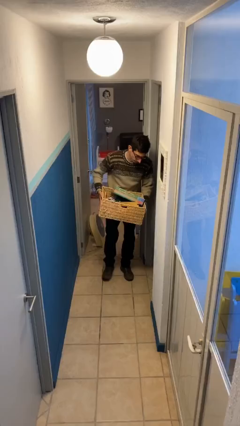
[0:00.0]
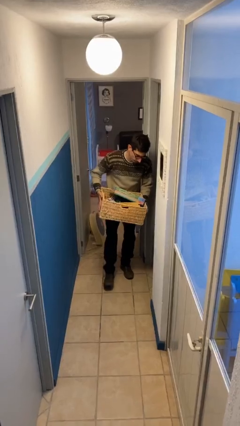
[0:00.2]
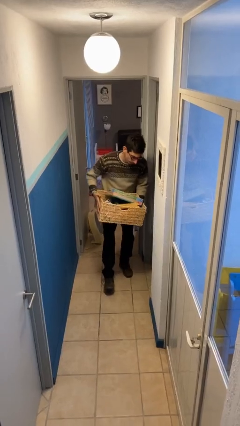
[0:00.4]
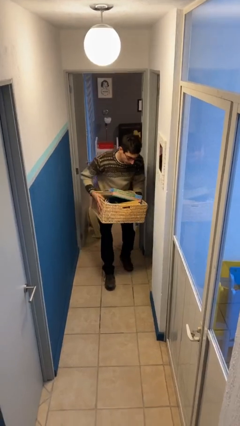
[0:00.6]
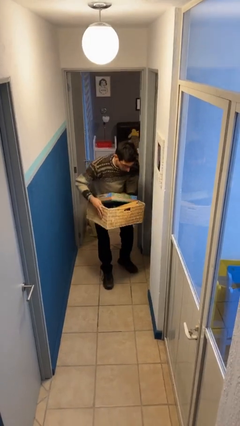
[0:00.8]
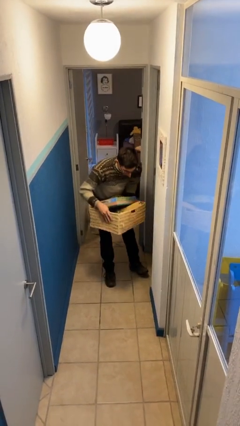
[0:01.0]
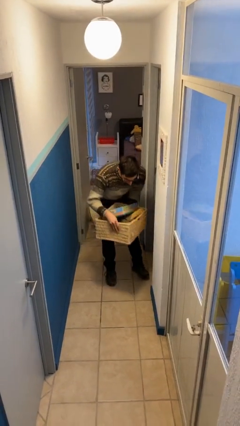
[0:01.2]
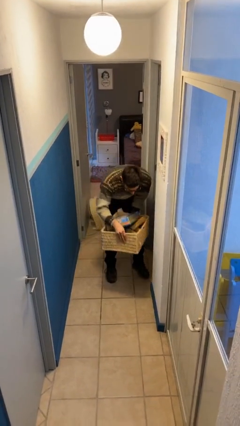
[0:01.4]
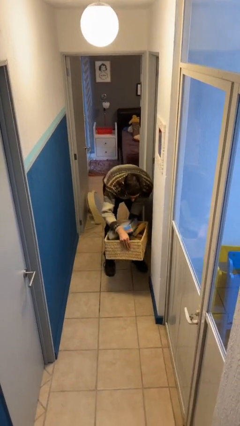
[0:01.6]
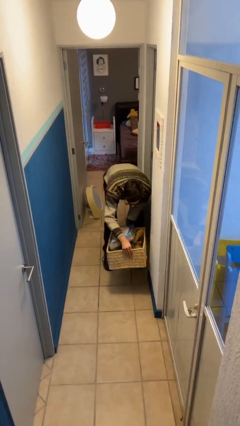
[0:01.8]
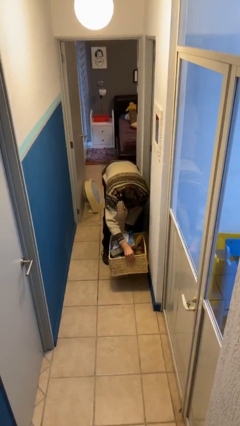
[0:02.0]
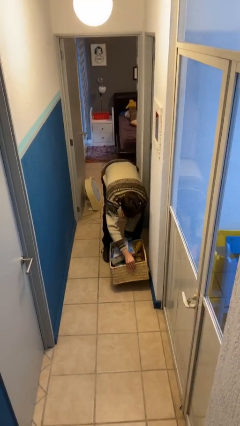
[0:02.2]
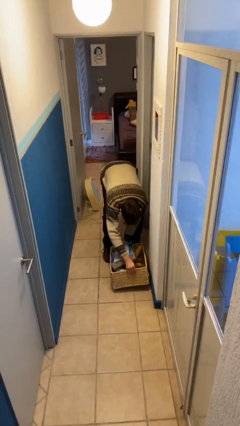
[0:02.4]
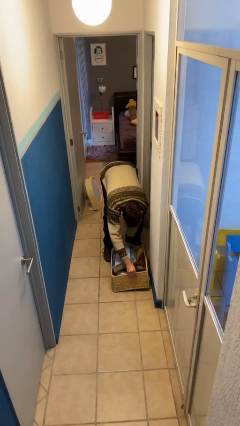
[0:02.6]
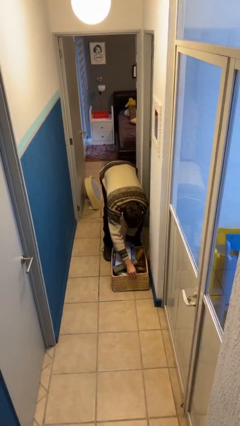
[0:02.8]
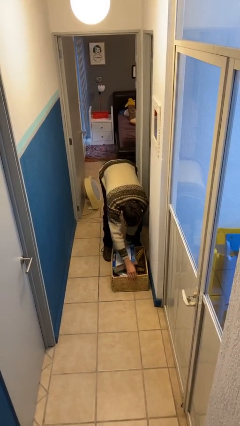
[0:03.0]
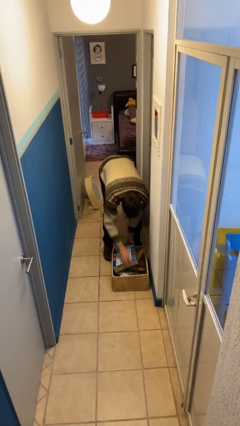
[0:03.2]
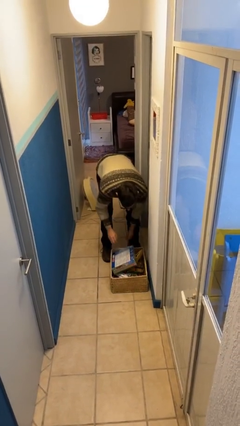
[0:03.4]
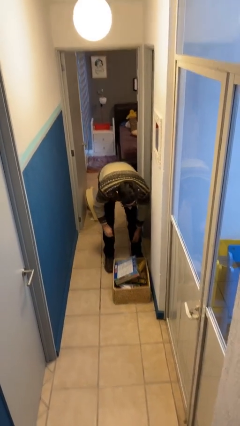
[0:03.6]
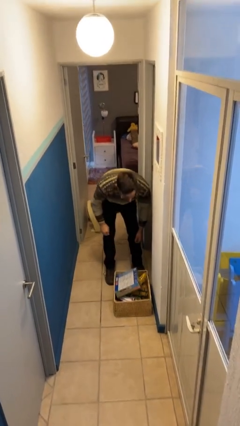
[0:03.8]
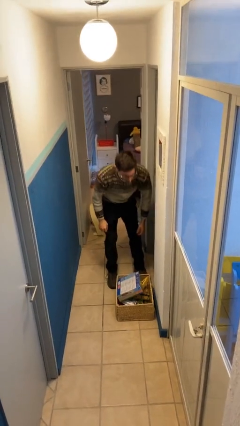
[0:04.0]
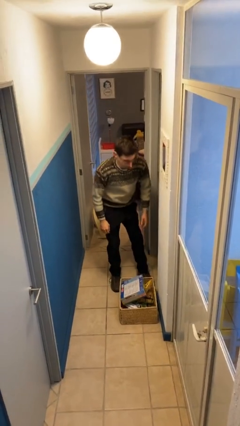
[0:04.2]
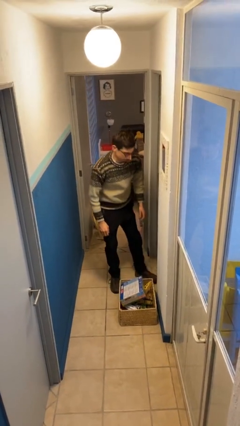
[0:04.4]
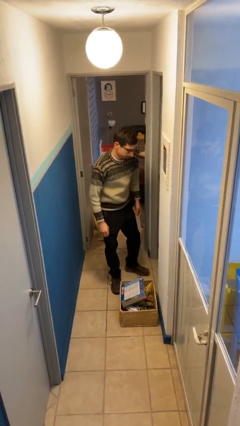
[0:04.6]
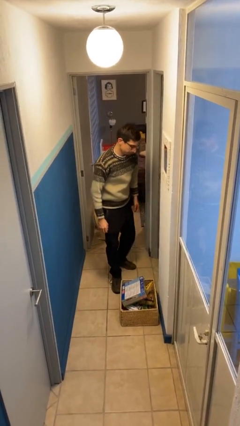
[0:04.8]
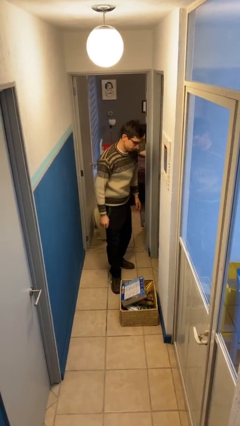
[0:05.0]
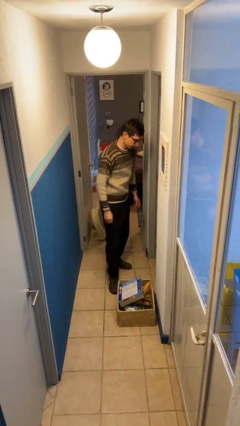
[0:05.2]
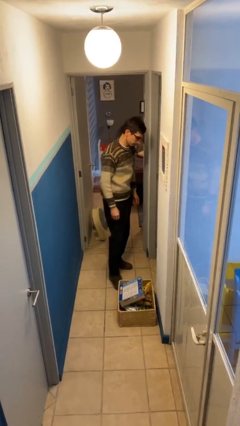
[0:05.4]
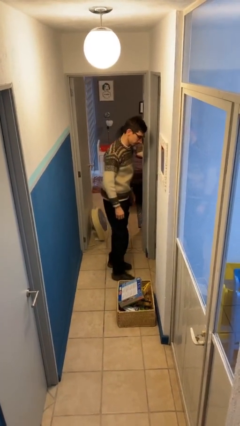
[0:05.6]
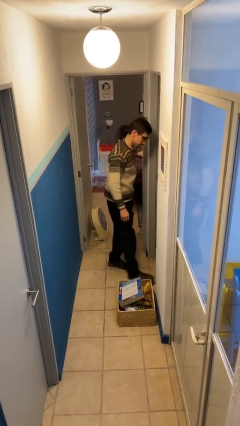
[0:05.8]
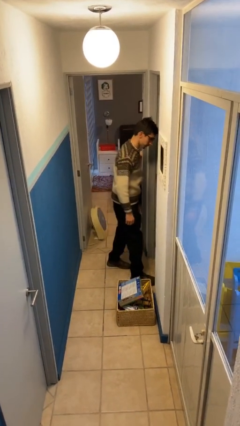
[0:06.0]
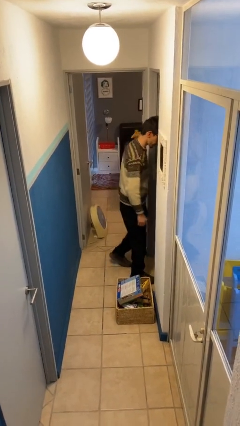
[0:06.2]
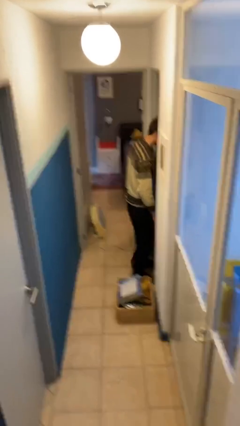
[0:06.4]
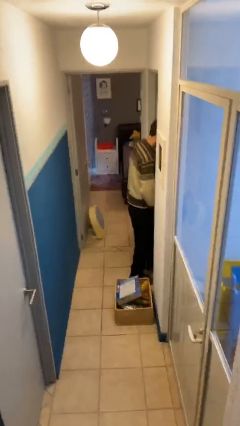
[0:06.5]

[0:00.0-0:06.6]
person puts down object on floor

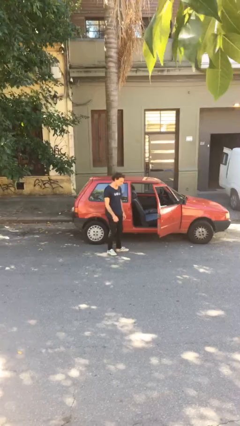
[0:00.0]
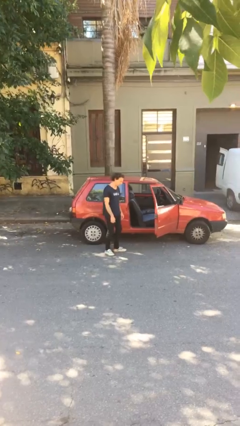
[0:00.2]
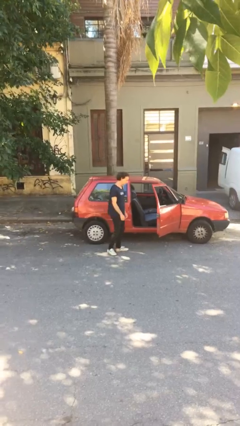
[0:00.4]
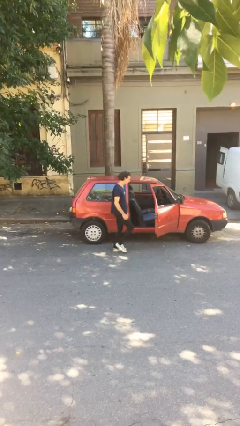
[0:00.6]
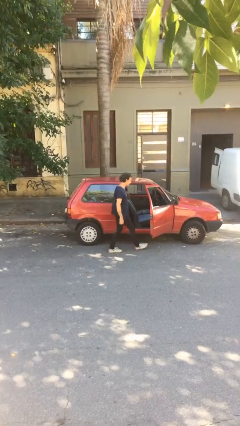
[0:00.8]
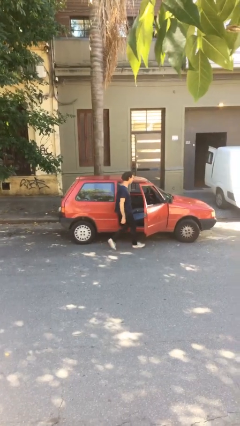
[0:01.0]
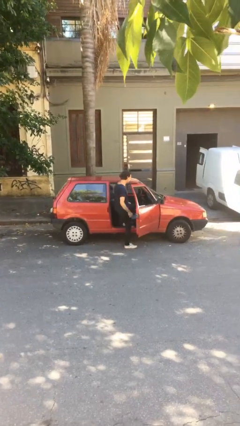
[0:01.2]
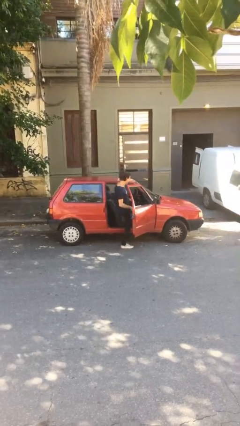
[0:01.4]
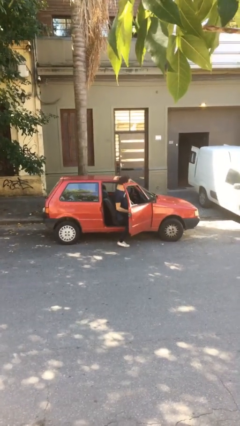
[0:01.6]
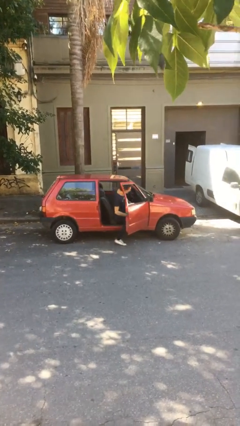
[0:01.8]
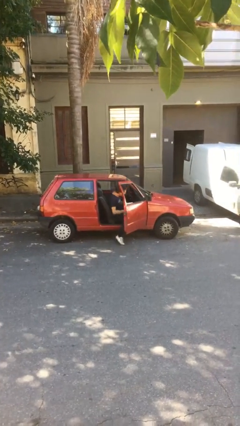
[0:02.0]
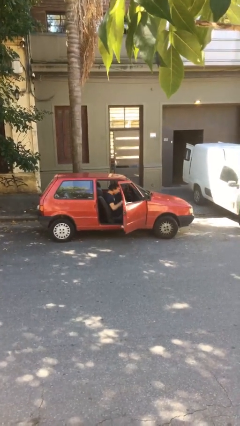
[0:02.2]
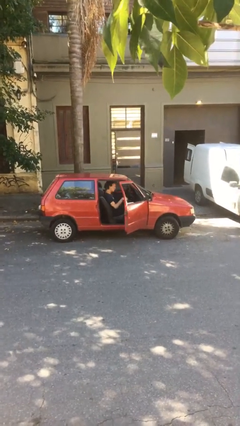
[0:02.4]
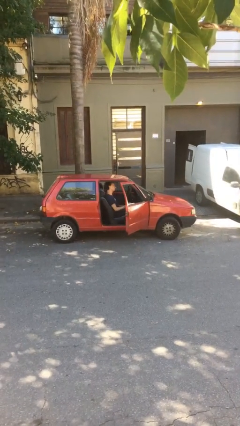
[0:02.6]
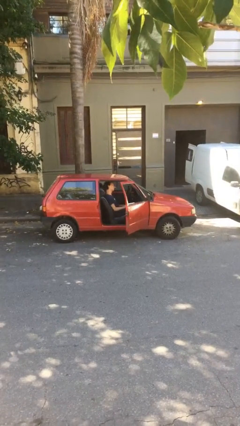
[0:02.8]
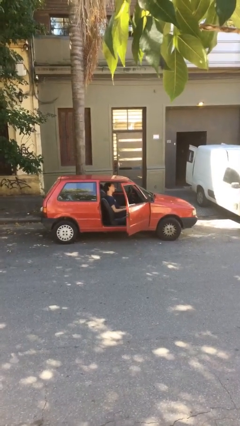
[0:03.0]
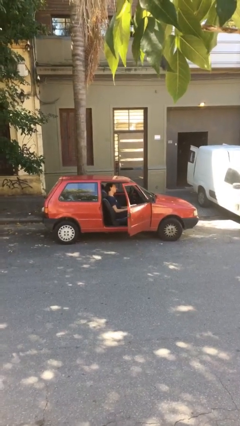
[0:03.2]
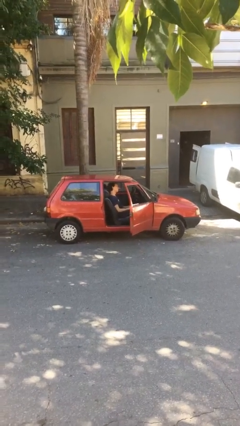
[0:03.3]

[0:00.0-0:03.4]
person enters car

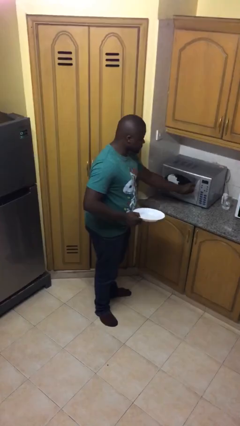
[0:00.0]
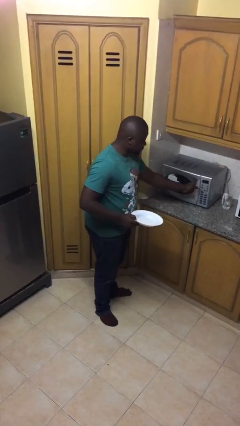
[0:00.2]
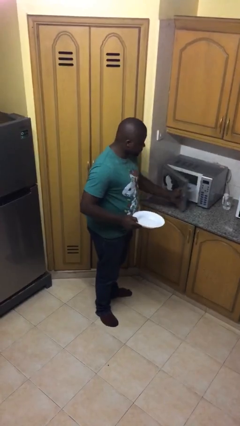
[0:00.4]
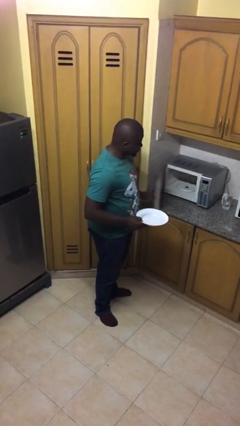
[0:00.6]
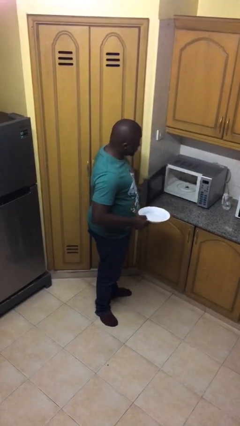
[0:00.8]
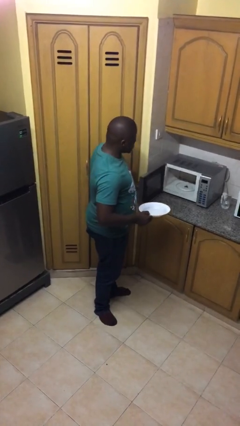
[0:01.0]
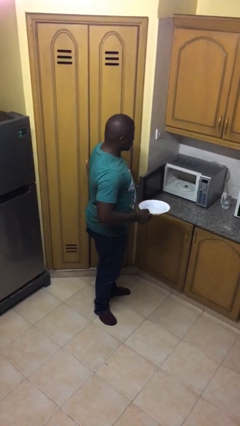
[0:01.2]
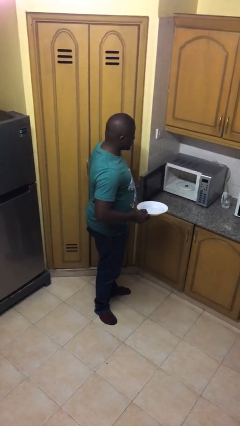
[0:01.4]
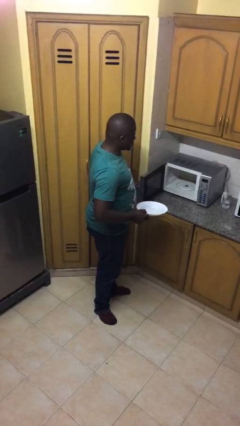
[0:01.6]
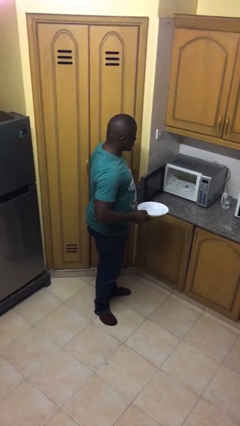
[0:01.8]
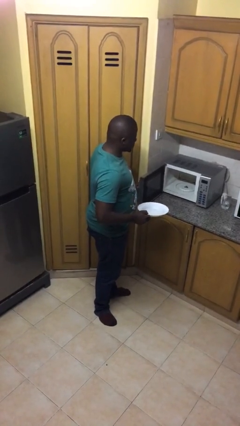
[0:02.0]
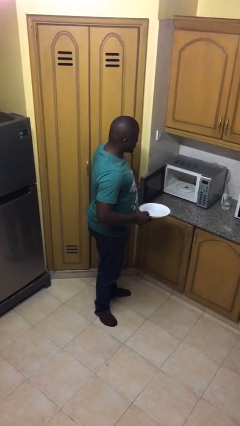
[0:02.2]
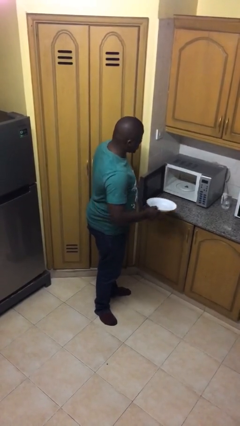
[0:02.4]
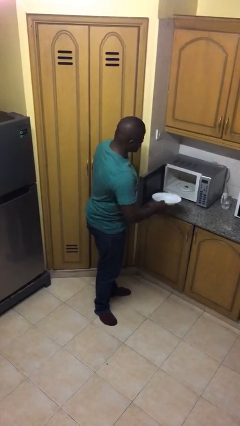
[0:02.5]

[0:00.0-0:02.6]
person opens microwave

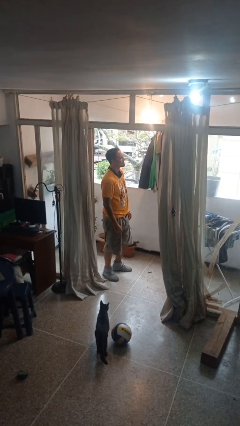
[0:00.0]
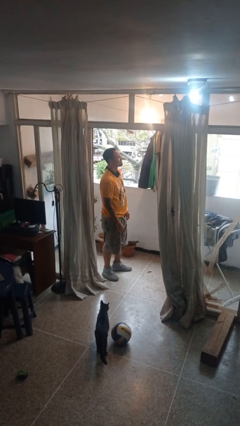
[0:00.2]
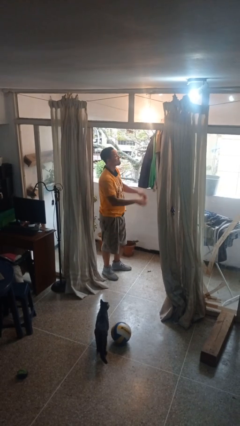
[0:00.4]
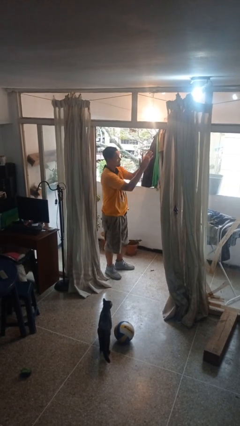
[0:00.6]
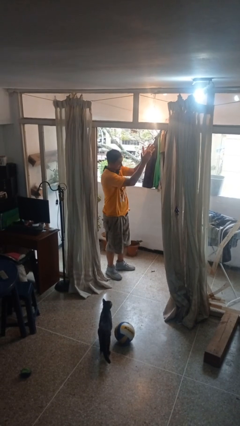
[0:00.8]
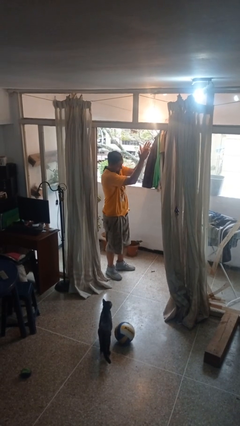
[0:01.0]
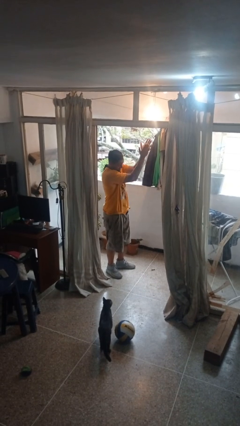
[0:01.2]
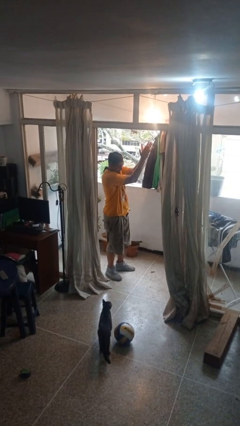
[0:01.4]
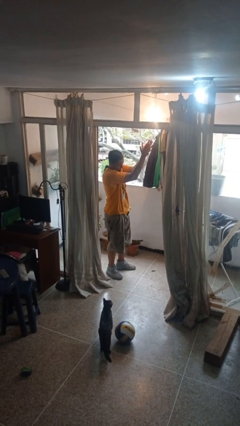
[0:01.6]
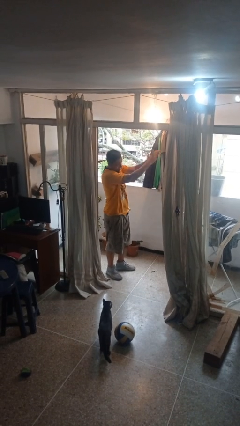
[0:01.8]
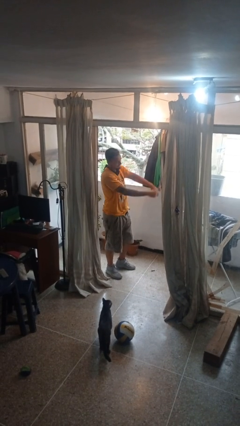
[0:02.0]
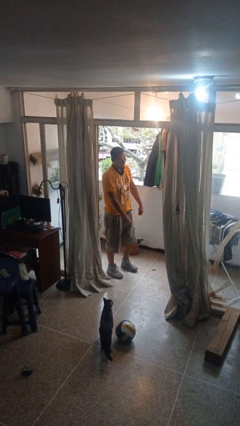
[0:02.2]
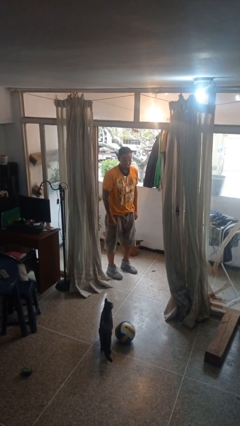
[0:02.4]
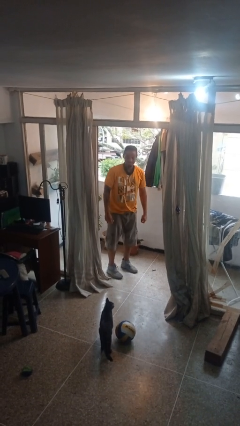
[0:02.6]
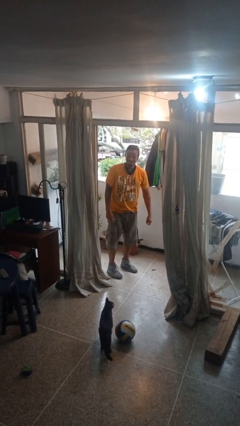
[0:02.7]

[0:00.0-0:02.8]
person claps hands

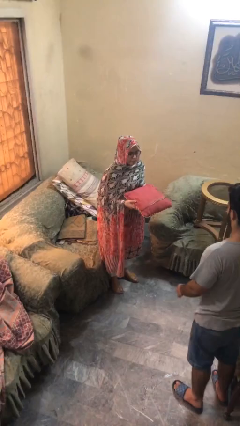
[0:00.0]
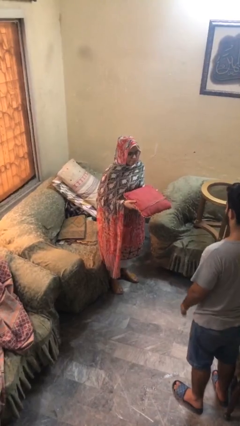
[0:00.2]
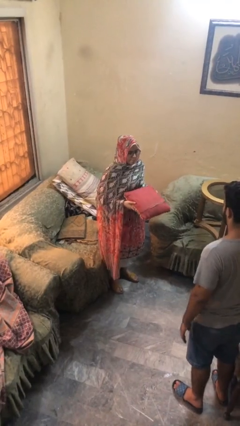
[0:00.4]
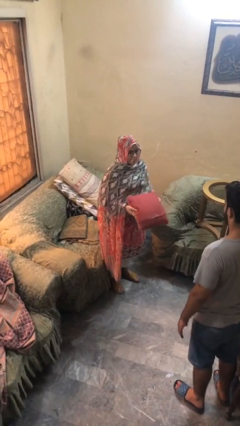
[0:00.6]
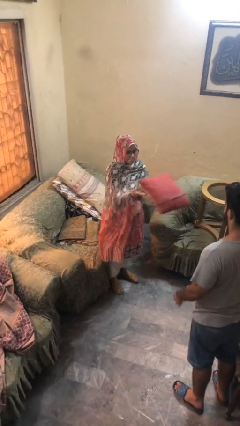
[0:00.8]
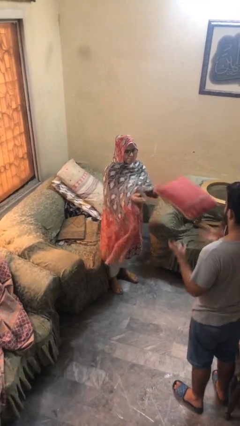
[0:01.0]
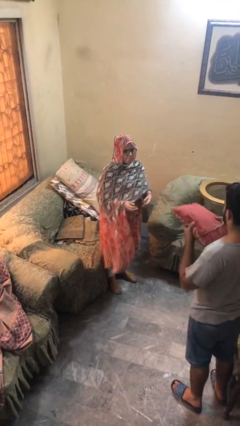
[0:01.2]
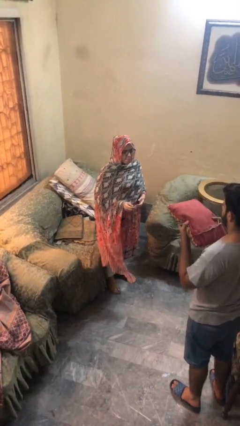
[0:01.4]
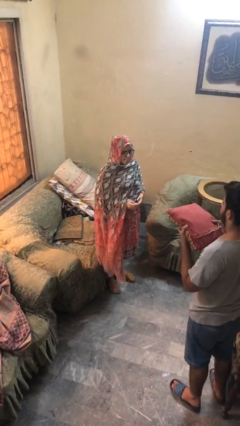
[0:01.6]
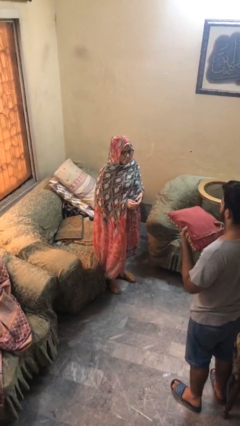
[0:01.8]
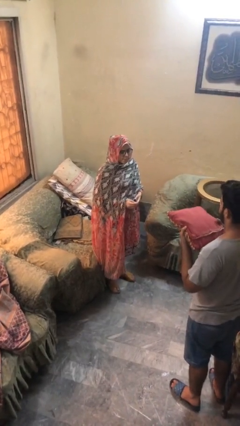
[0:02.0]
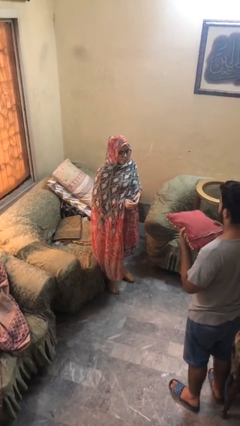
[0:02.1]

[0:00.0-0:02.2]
person throws object to person
